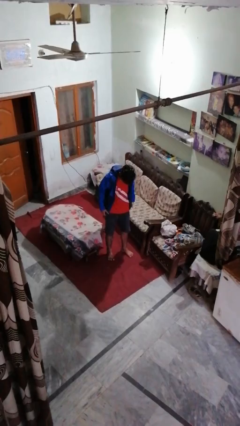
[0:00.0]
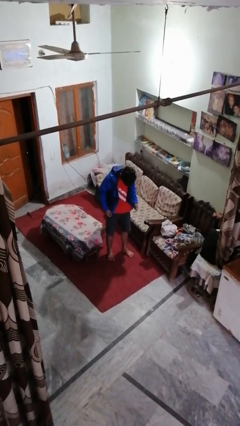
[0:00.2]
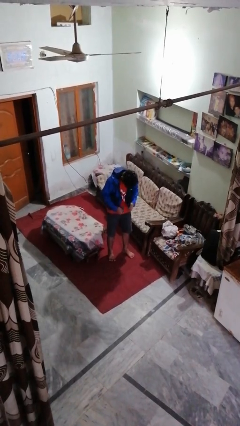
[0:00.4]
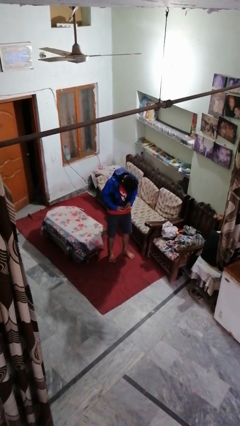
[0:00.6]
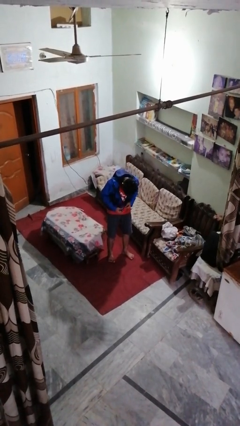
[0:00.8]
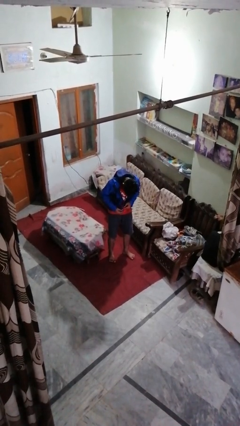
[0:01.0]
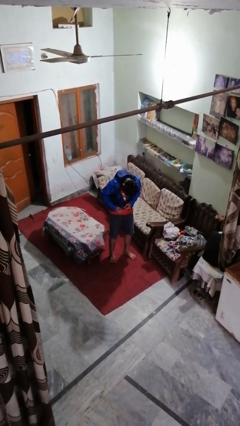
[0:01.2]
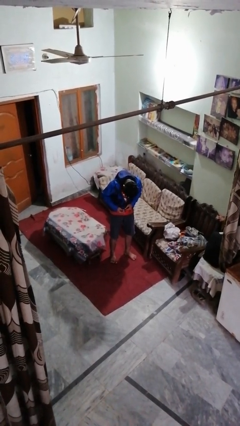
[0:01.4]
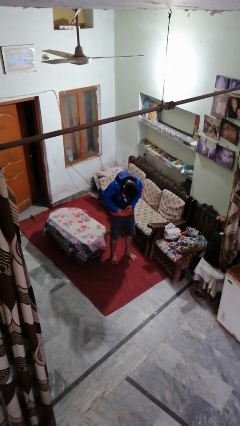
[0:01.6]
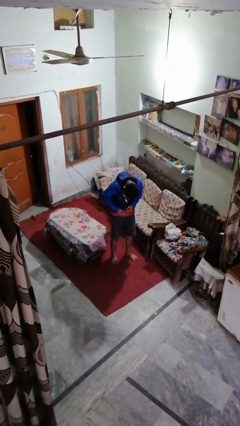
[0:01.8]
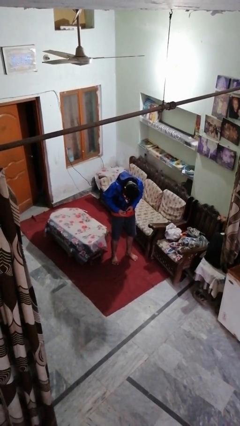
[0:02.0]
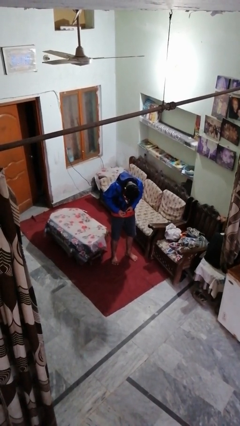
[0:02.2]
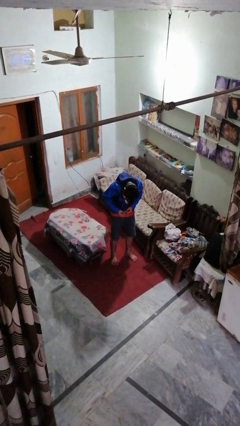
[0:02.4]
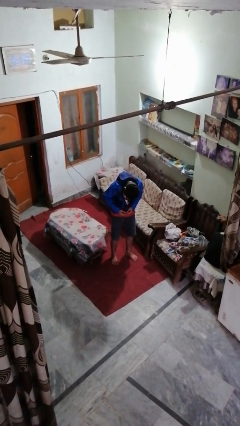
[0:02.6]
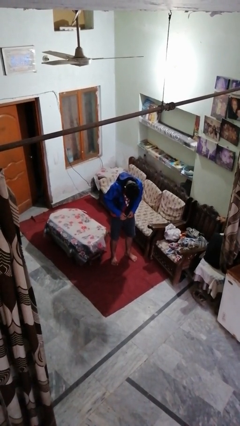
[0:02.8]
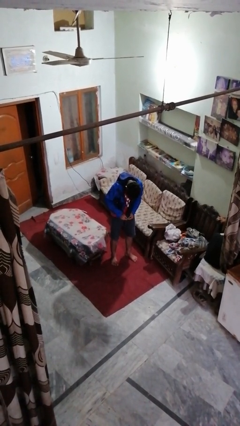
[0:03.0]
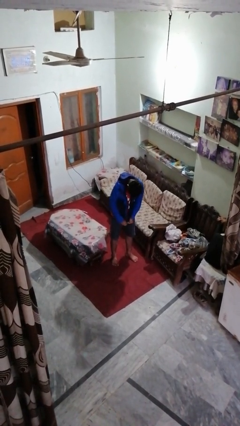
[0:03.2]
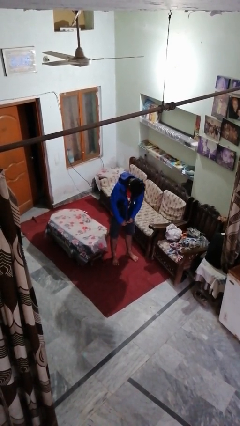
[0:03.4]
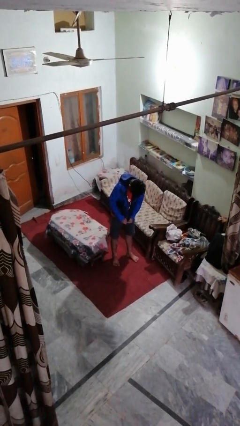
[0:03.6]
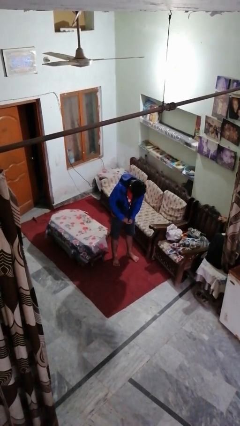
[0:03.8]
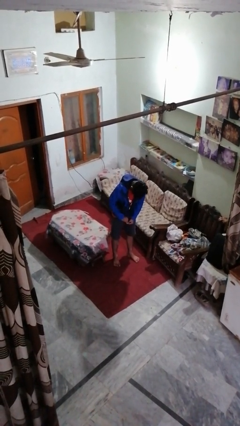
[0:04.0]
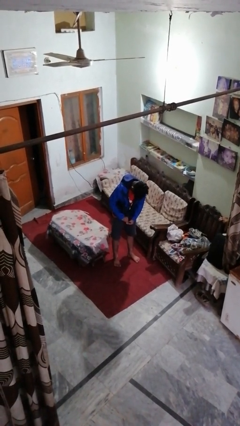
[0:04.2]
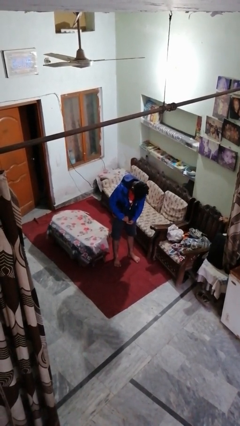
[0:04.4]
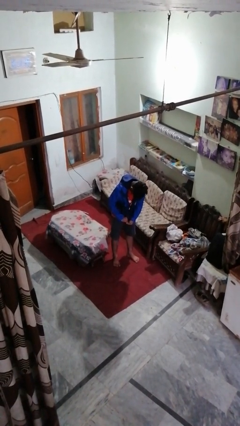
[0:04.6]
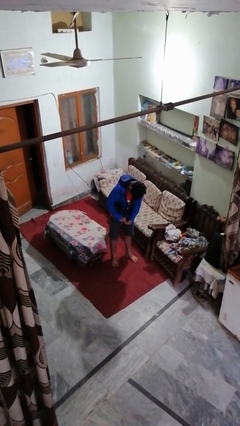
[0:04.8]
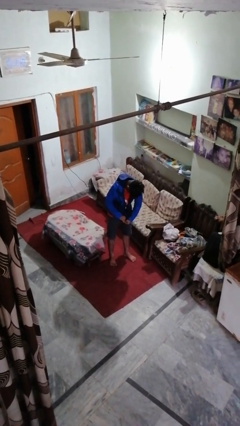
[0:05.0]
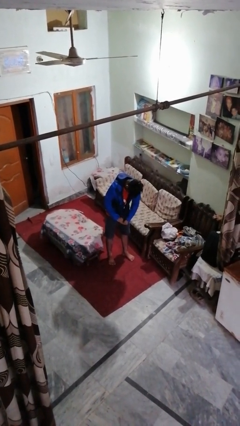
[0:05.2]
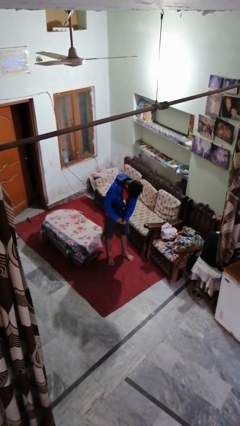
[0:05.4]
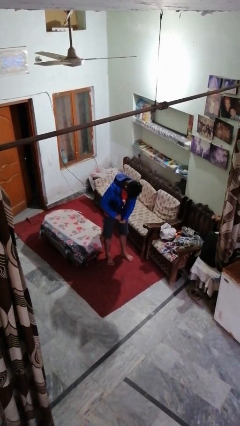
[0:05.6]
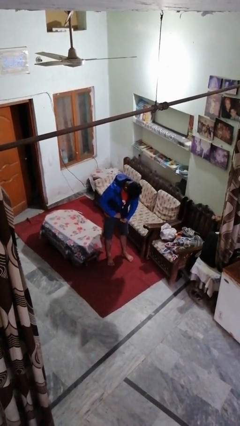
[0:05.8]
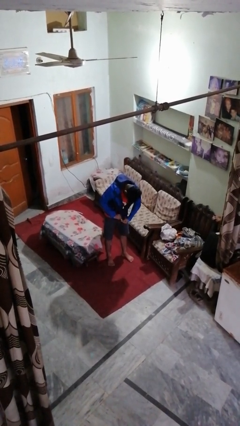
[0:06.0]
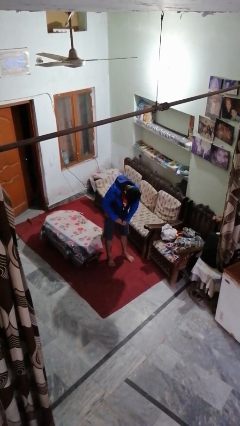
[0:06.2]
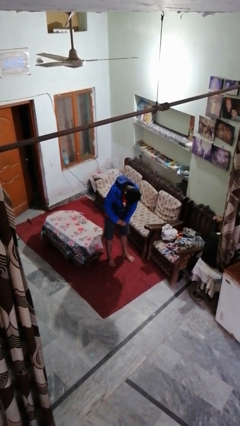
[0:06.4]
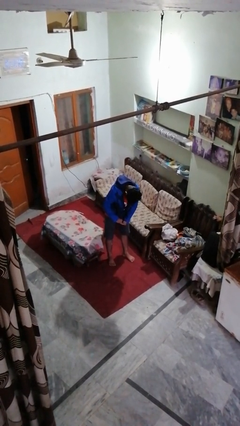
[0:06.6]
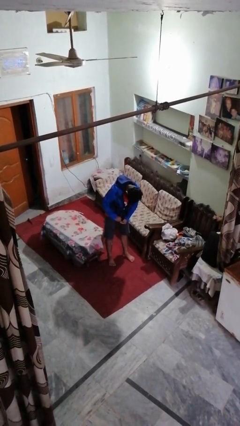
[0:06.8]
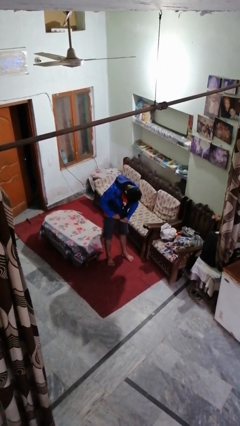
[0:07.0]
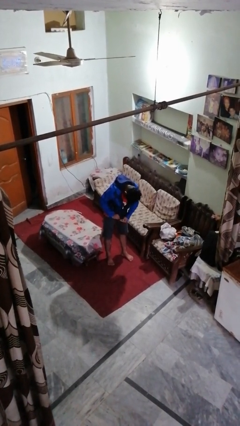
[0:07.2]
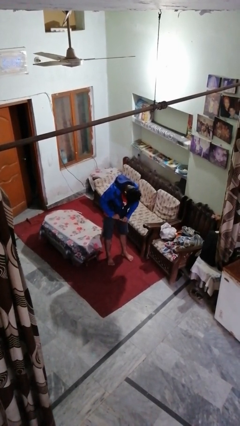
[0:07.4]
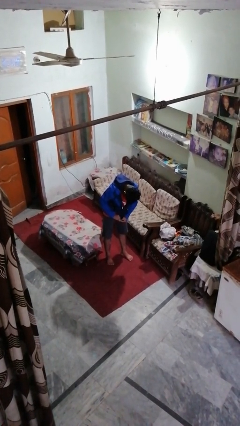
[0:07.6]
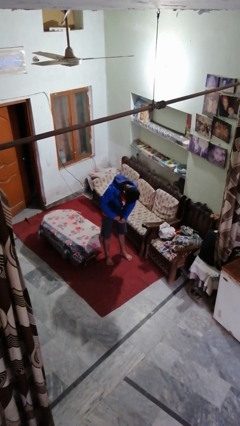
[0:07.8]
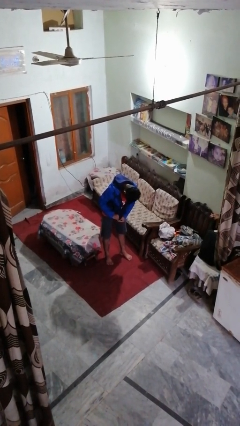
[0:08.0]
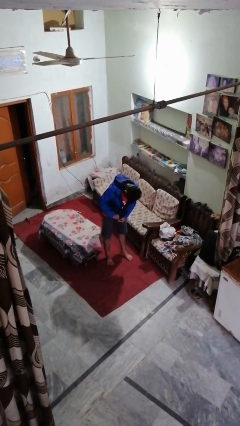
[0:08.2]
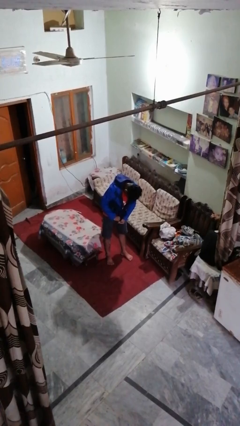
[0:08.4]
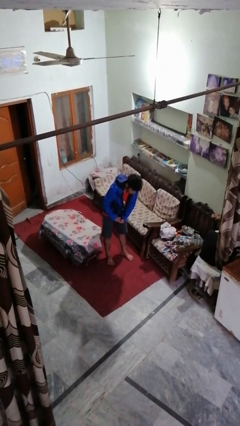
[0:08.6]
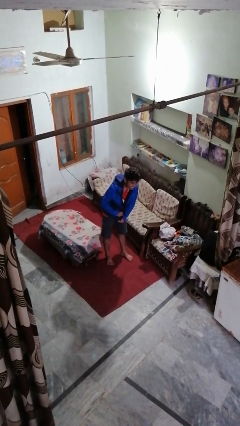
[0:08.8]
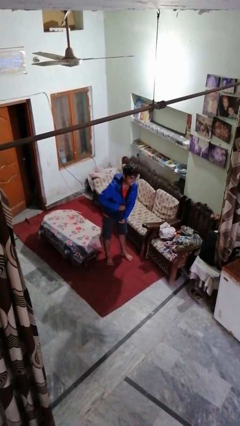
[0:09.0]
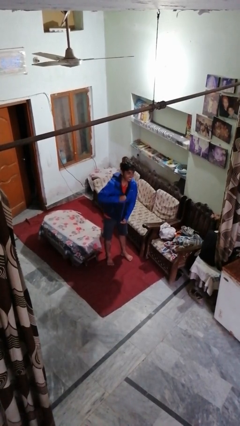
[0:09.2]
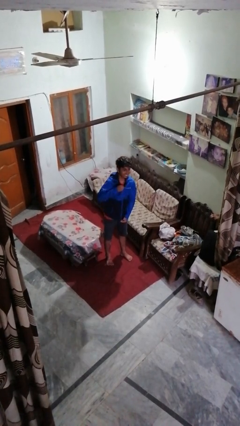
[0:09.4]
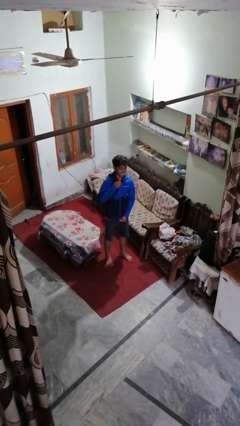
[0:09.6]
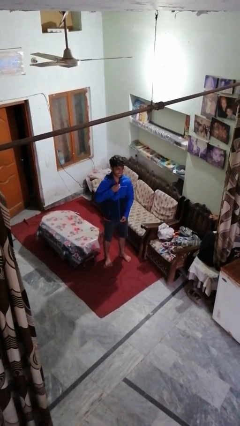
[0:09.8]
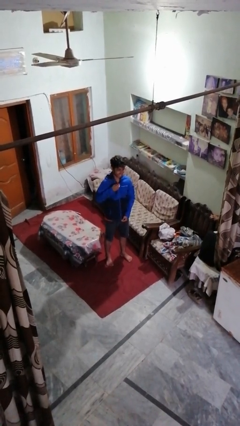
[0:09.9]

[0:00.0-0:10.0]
person zips up jacket

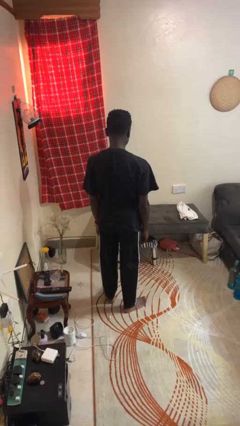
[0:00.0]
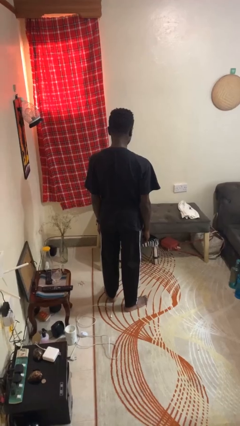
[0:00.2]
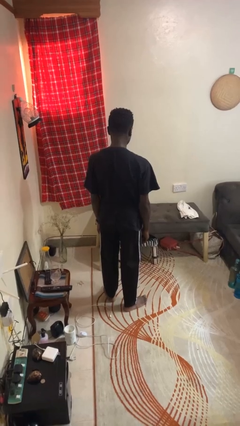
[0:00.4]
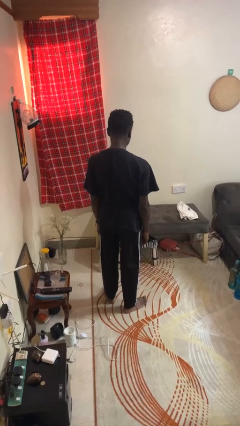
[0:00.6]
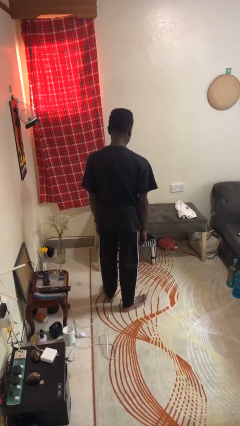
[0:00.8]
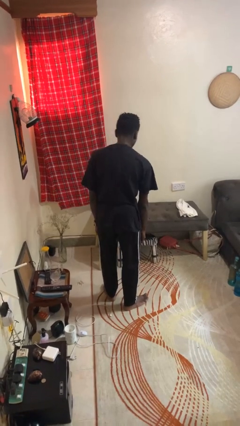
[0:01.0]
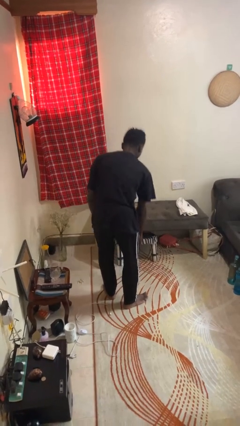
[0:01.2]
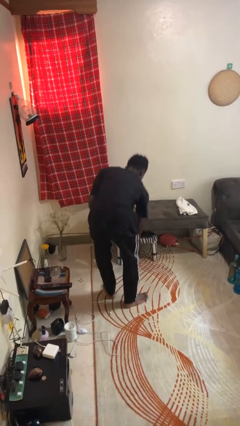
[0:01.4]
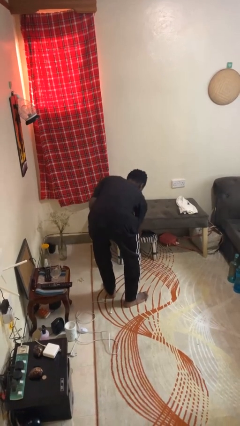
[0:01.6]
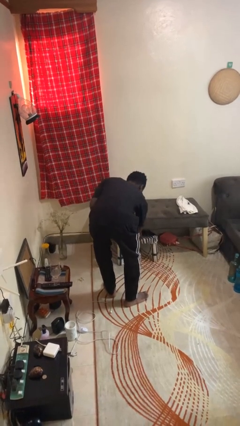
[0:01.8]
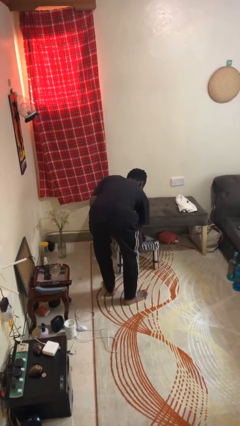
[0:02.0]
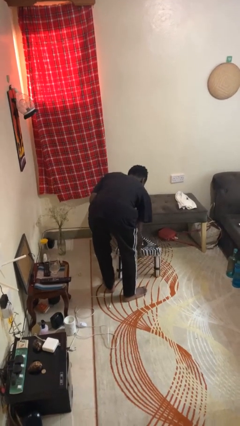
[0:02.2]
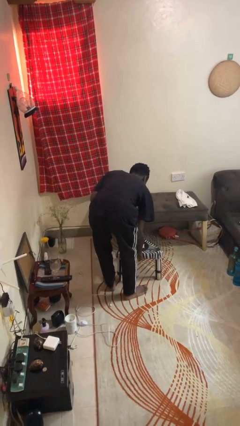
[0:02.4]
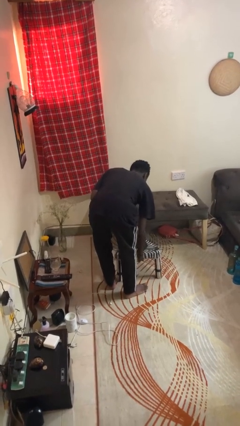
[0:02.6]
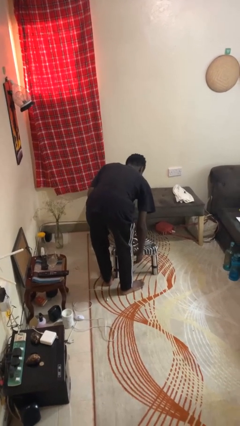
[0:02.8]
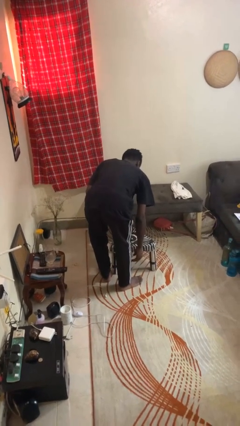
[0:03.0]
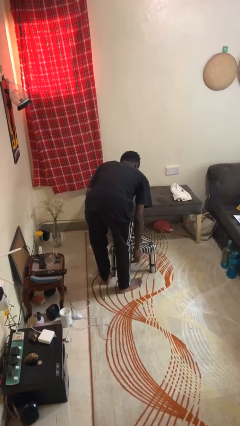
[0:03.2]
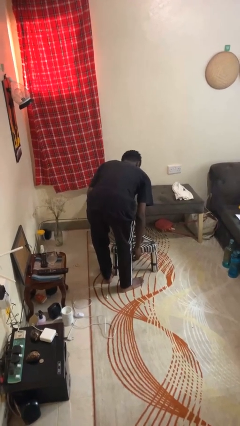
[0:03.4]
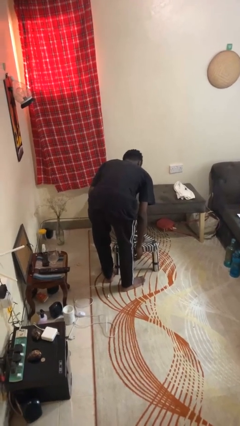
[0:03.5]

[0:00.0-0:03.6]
person pulls out chair

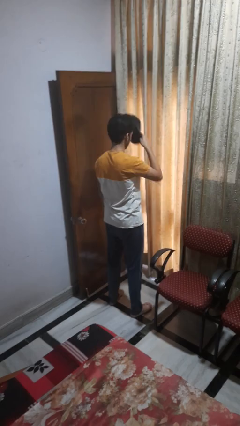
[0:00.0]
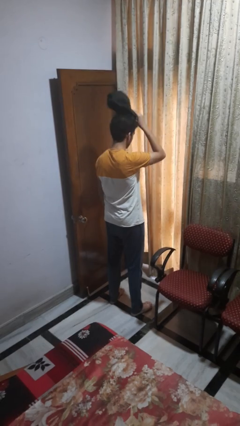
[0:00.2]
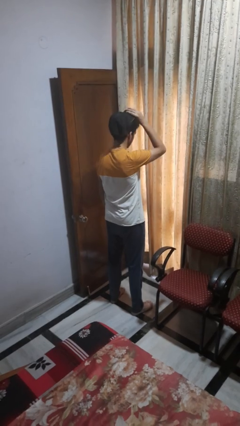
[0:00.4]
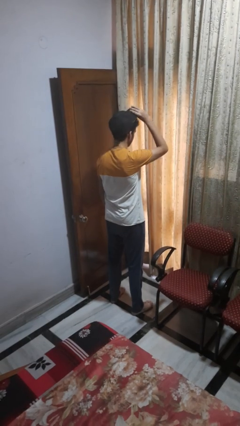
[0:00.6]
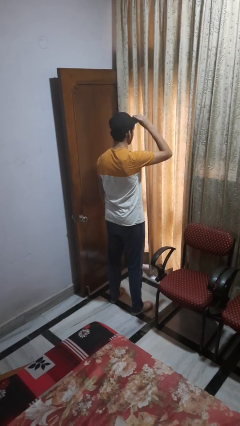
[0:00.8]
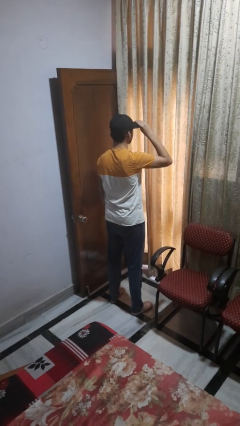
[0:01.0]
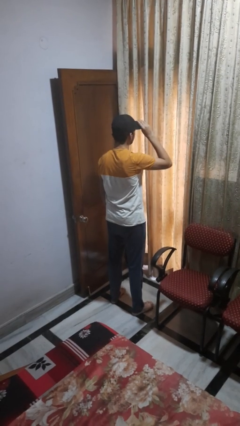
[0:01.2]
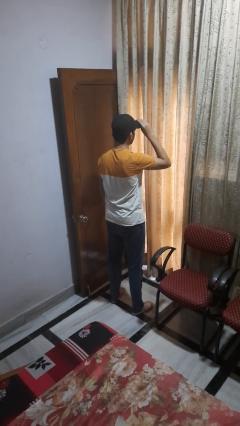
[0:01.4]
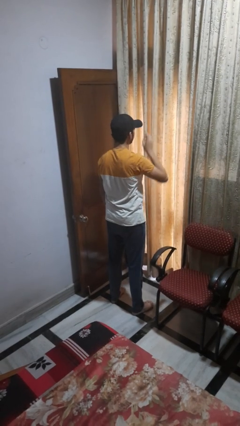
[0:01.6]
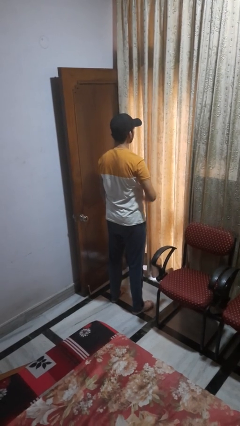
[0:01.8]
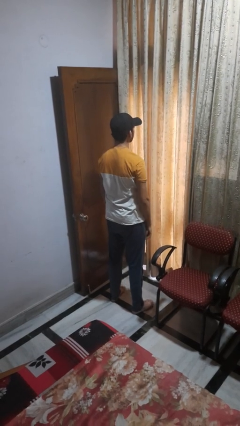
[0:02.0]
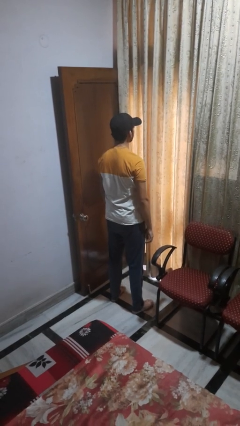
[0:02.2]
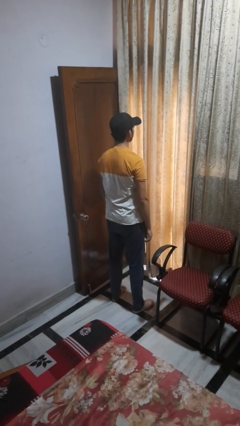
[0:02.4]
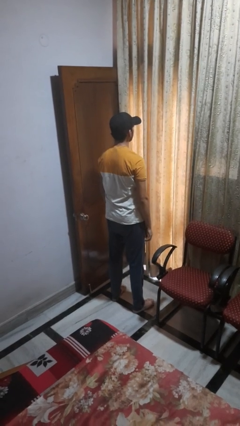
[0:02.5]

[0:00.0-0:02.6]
person puts on hat

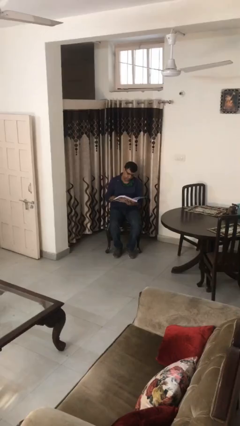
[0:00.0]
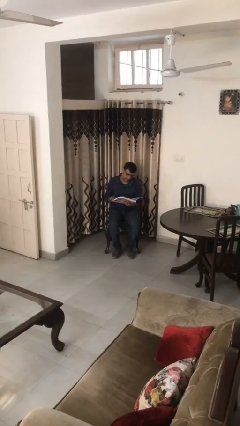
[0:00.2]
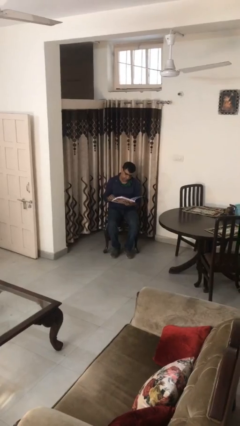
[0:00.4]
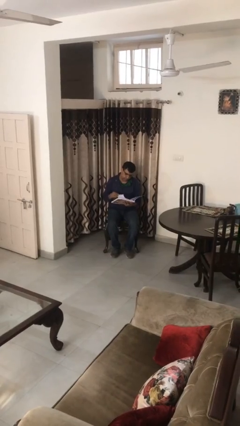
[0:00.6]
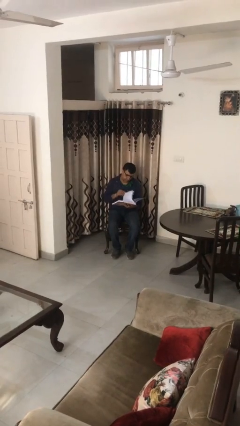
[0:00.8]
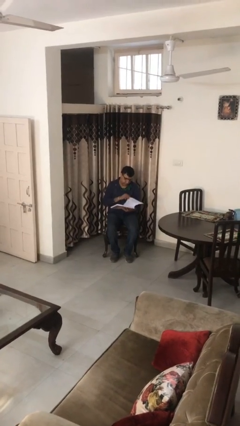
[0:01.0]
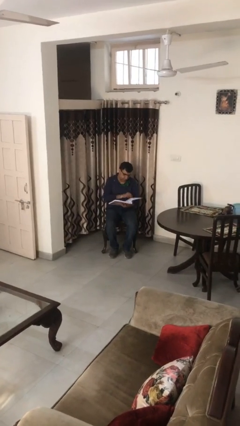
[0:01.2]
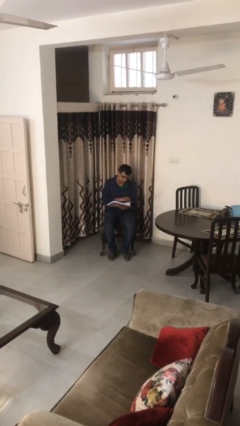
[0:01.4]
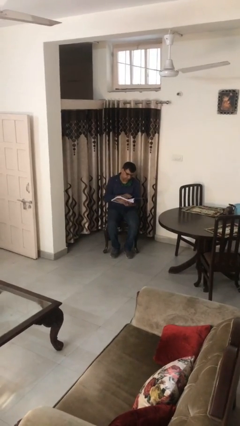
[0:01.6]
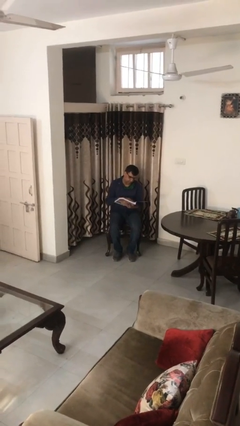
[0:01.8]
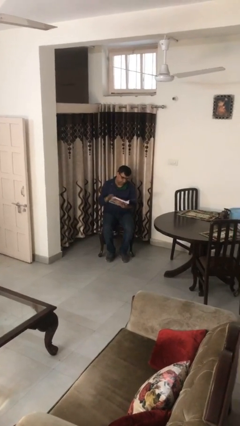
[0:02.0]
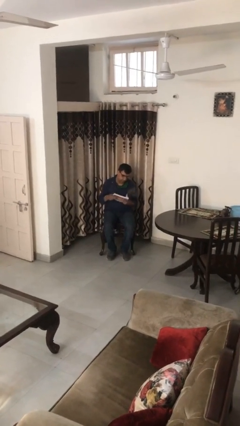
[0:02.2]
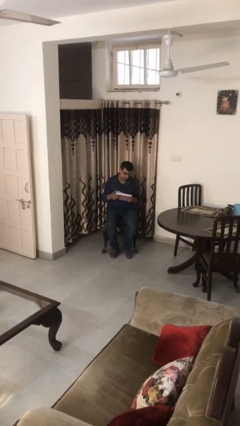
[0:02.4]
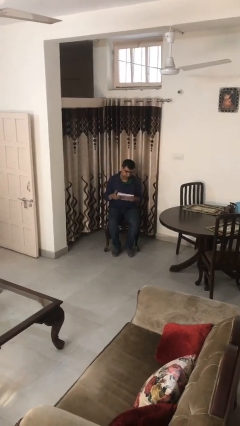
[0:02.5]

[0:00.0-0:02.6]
person reads document
